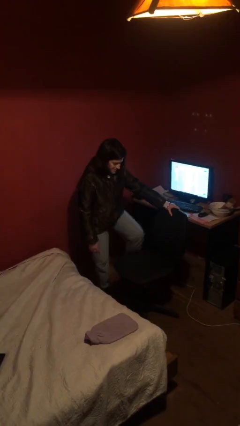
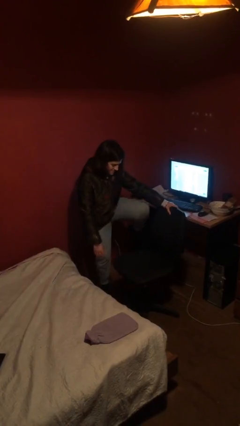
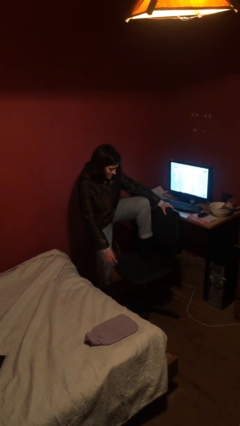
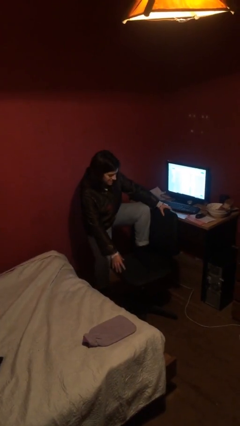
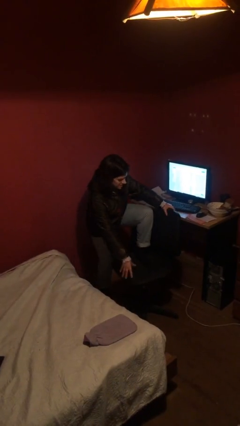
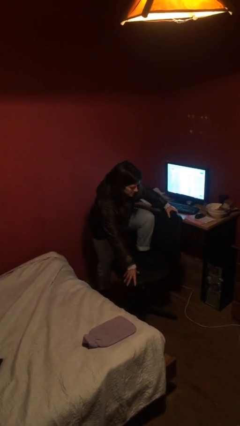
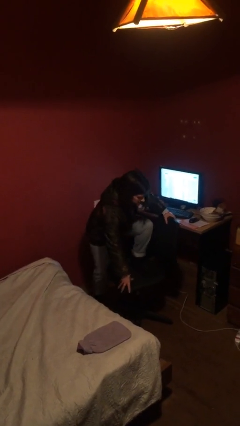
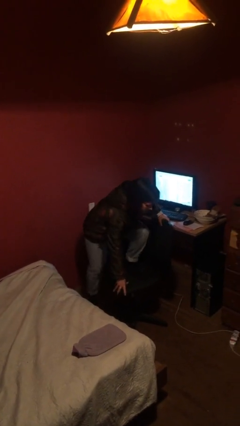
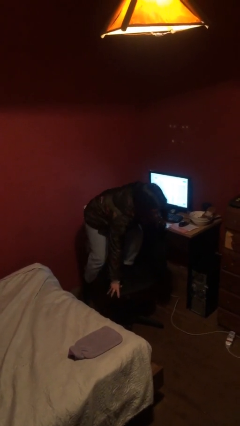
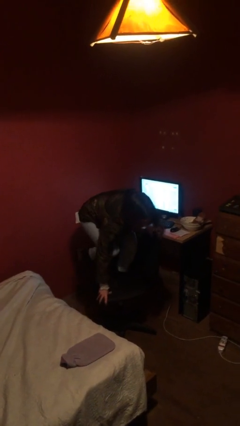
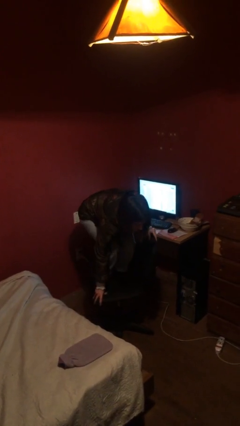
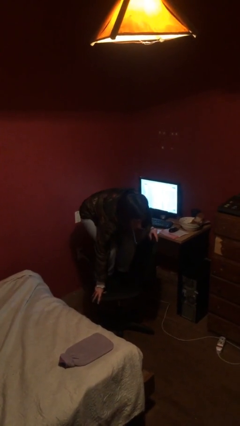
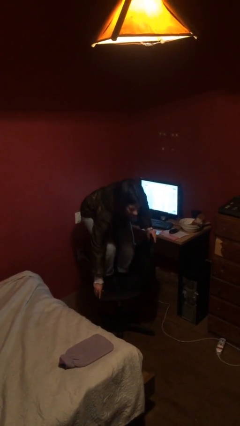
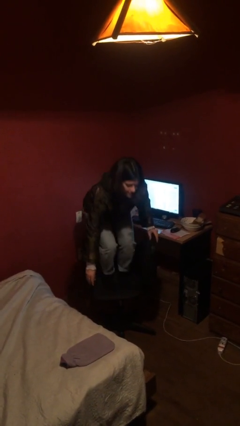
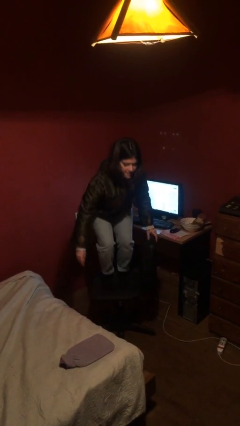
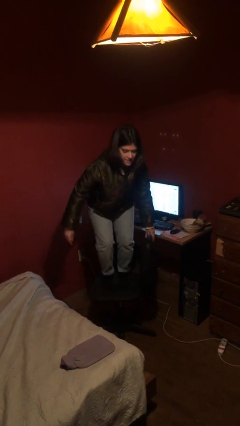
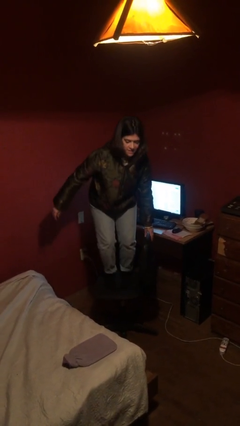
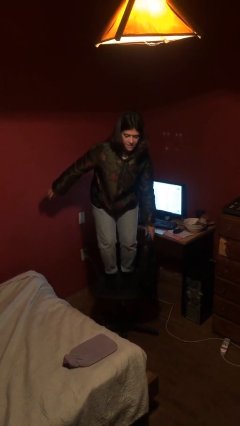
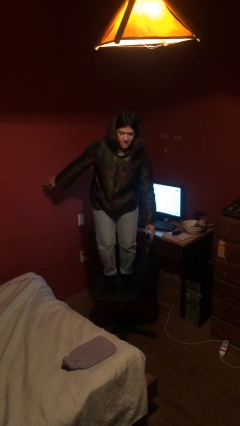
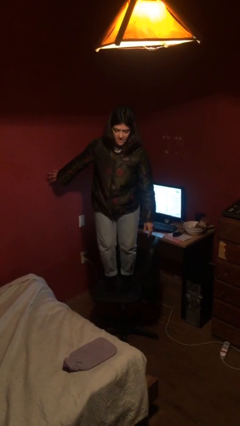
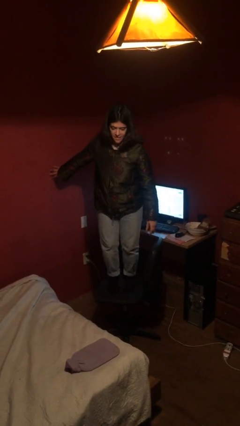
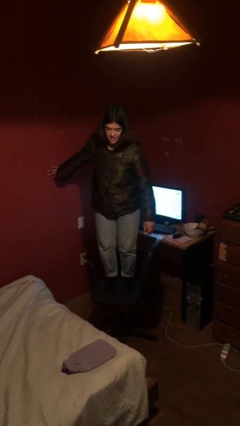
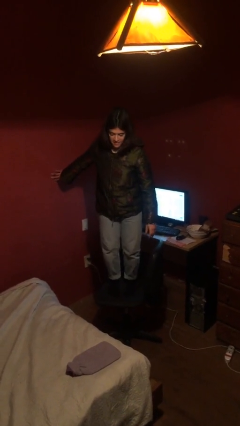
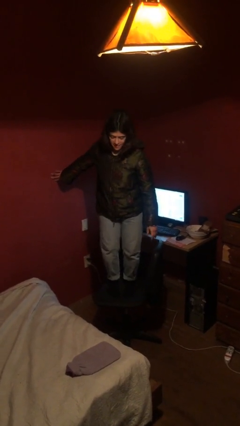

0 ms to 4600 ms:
person climbs on chair

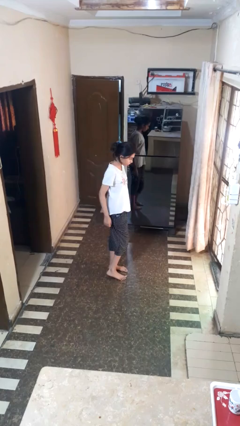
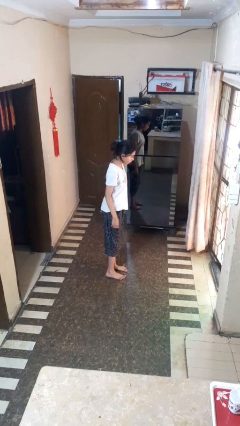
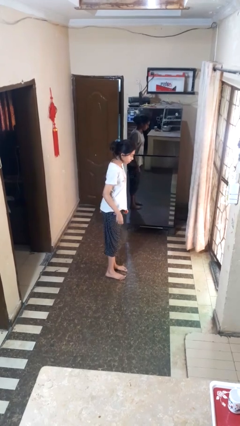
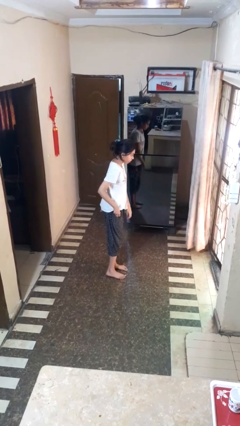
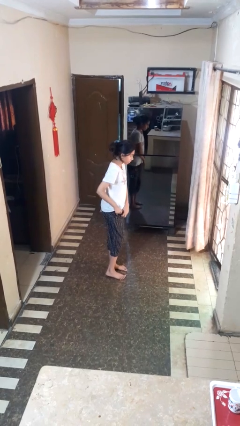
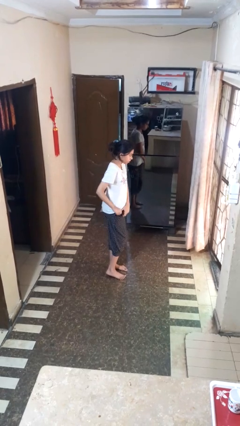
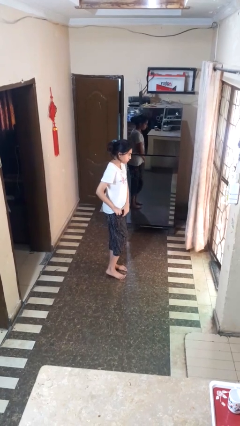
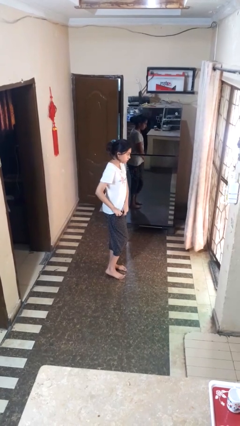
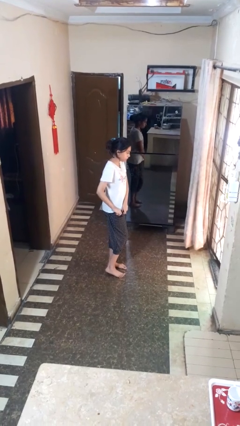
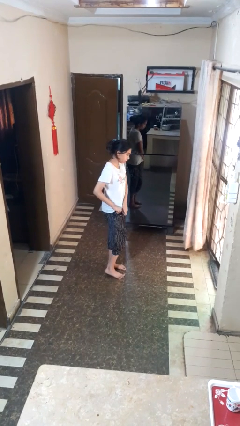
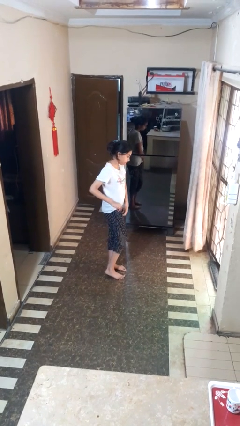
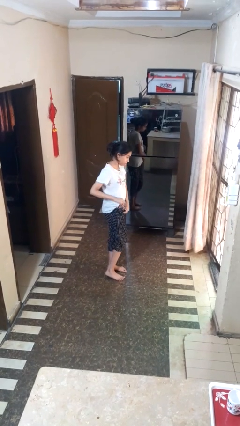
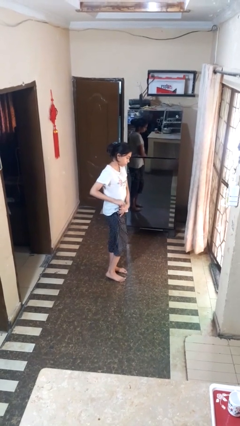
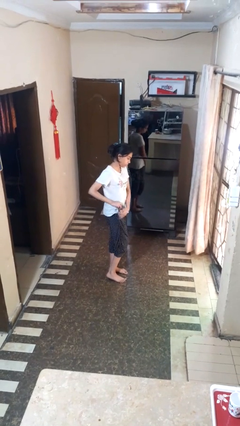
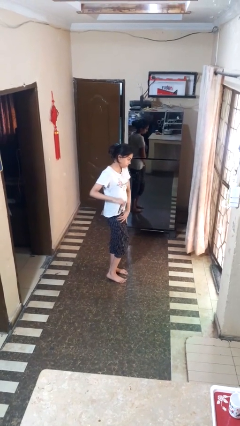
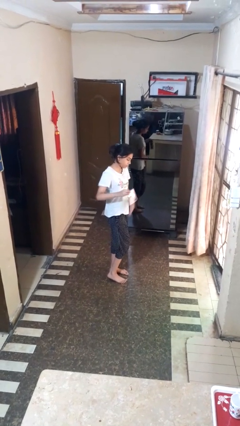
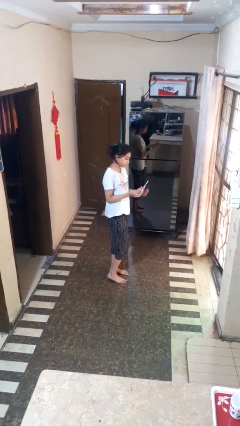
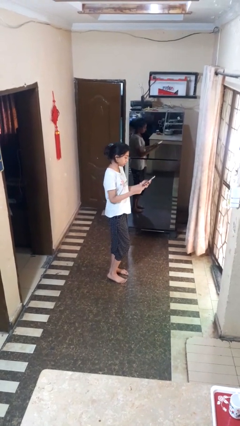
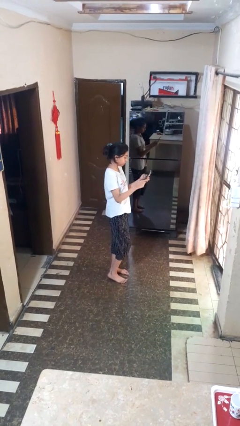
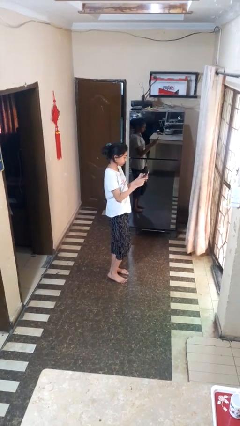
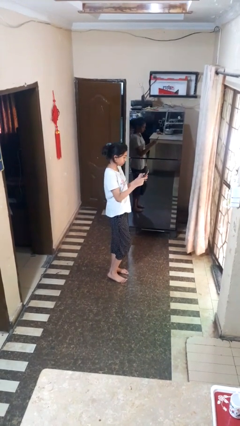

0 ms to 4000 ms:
person takes phone from pocket

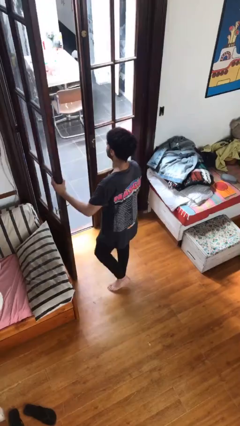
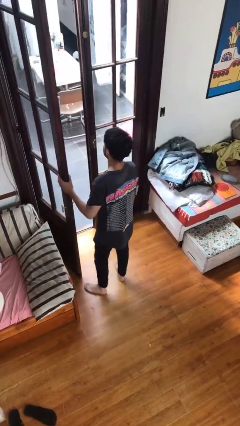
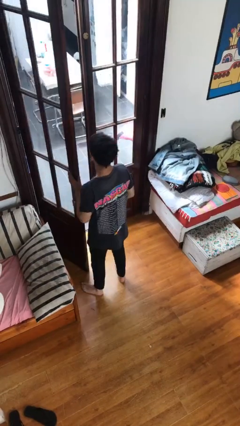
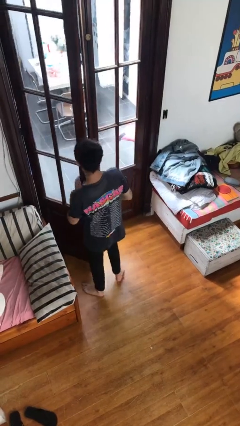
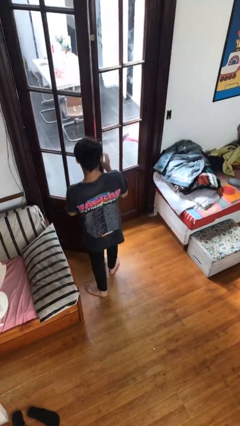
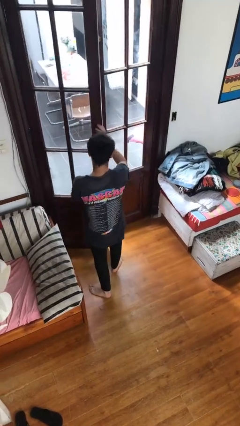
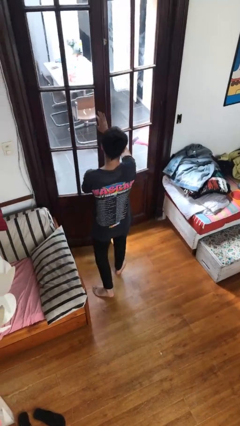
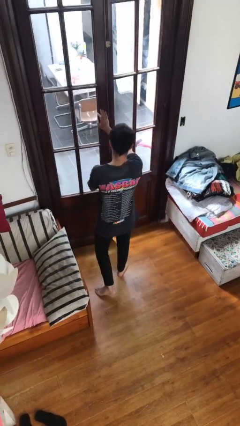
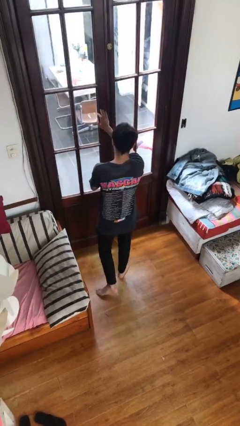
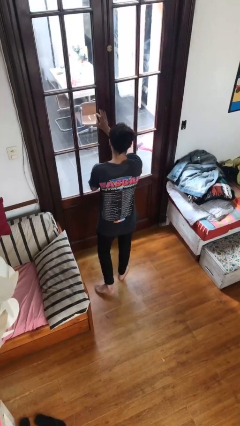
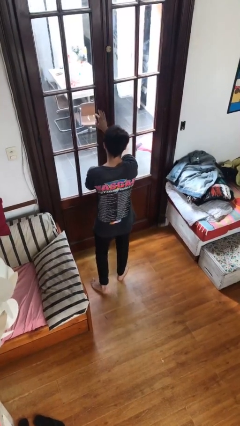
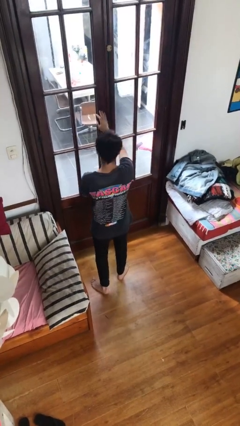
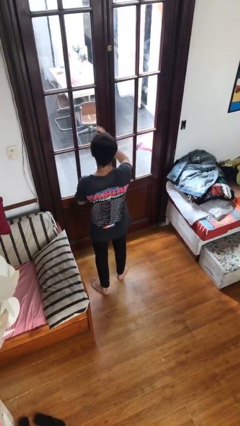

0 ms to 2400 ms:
person closes facility door

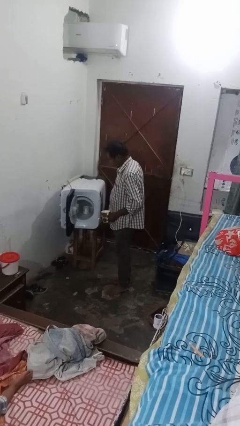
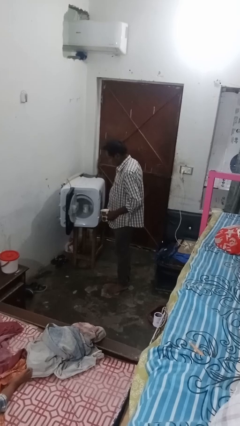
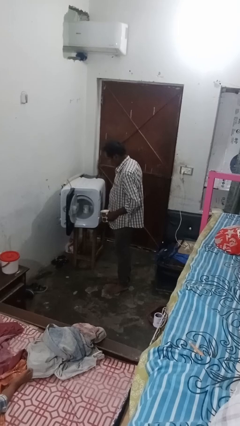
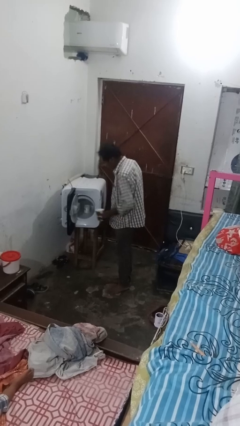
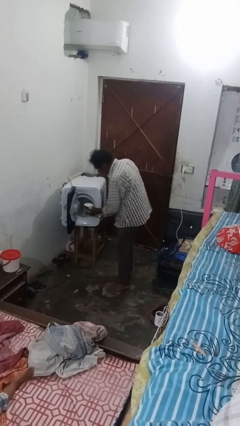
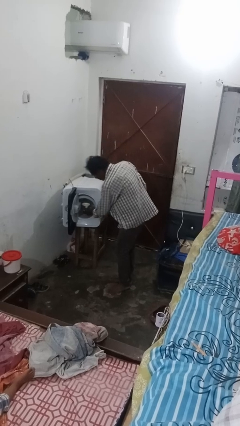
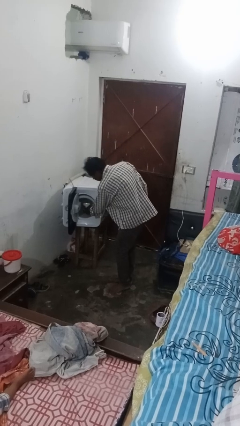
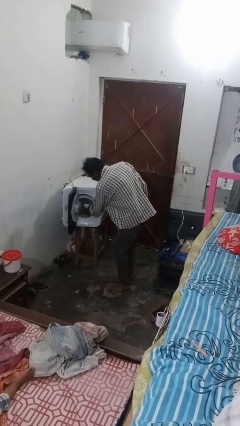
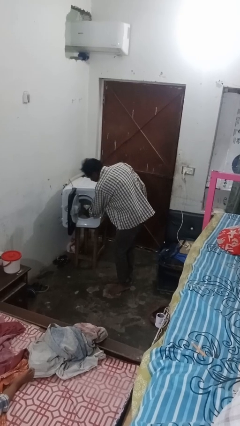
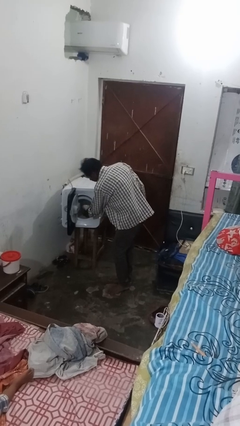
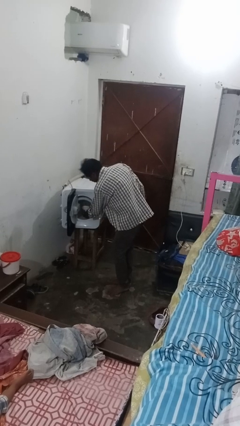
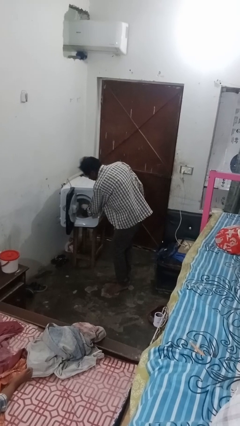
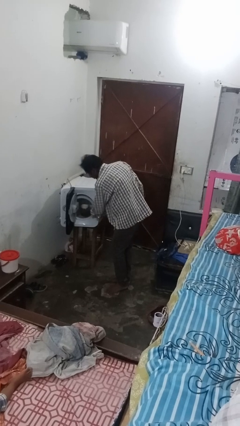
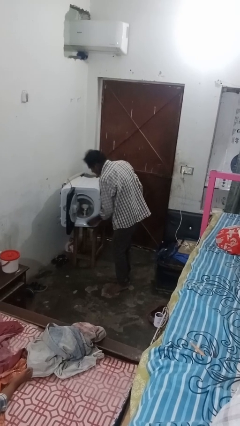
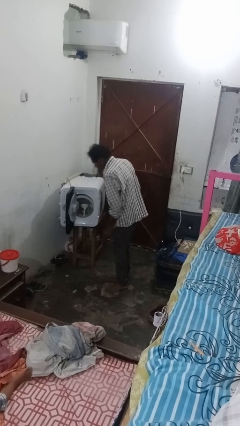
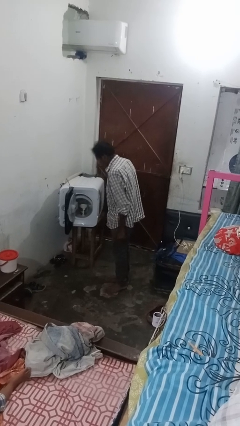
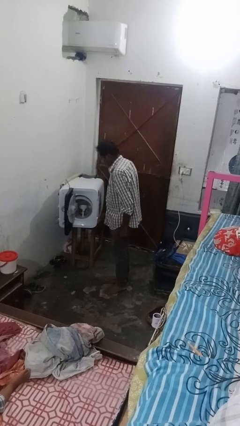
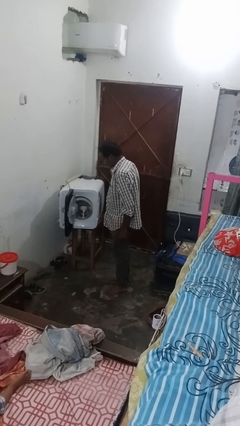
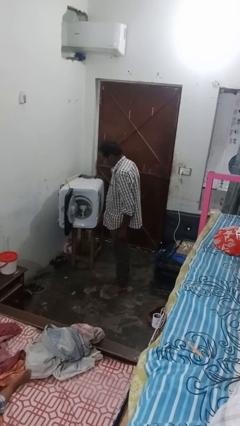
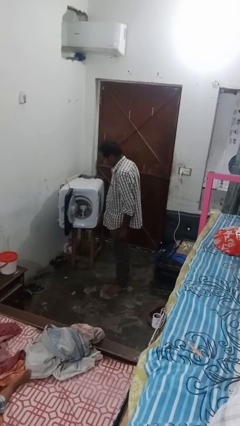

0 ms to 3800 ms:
person loads dishwasher

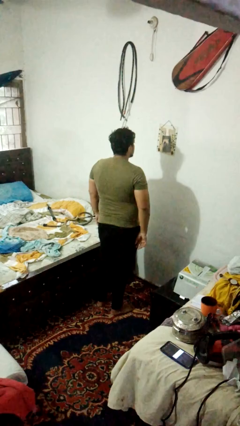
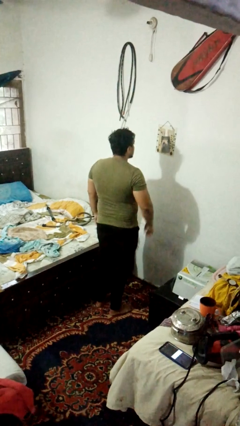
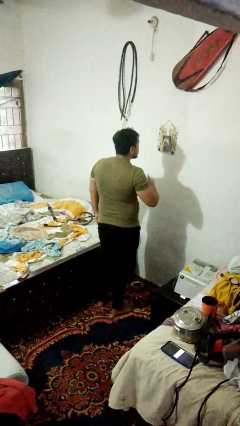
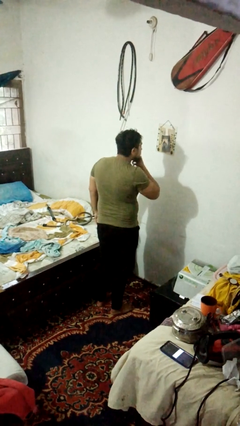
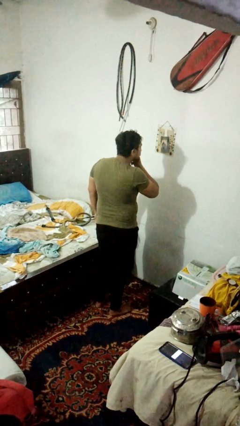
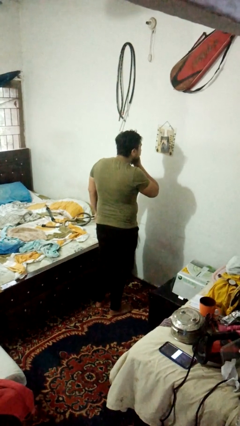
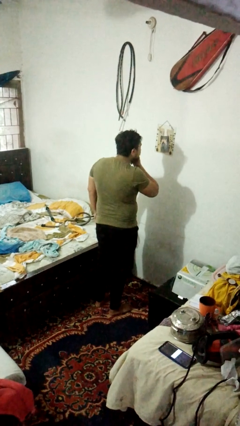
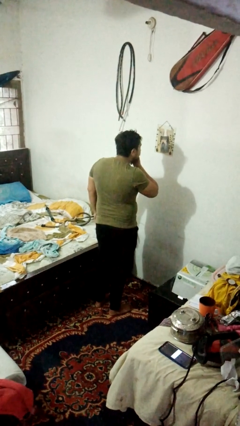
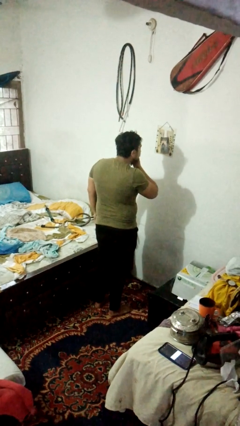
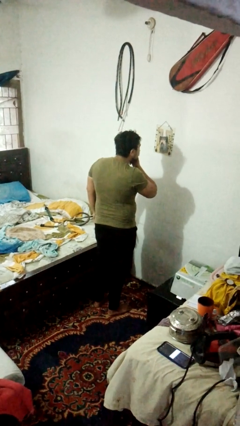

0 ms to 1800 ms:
person strokes chin

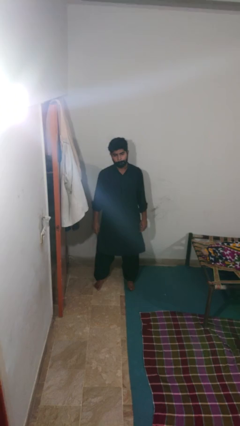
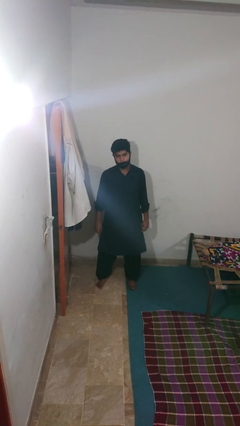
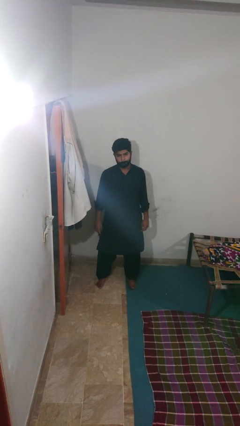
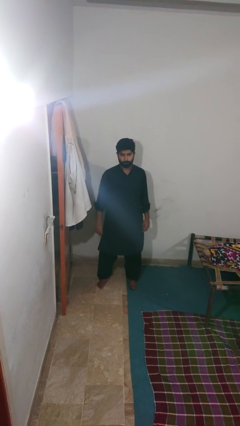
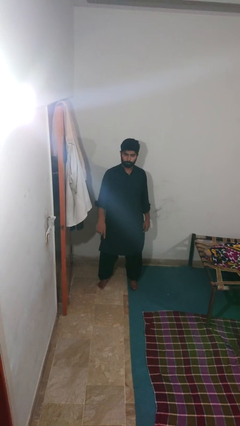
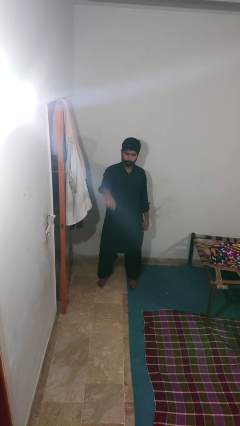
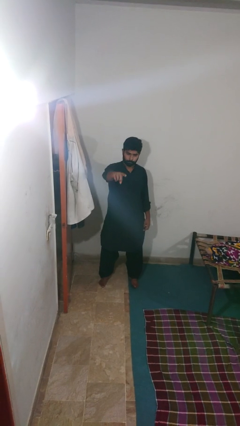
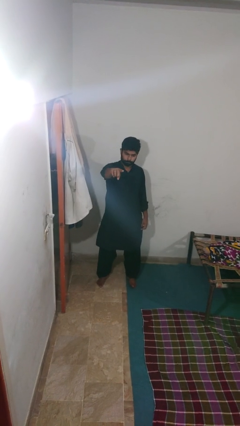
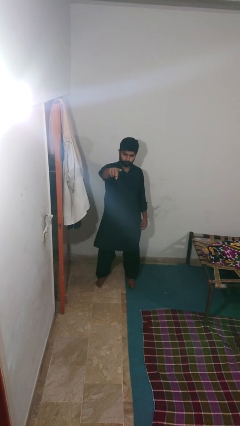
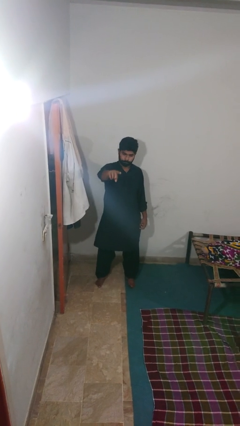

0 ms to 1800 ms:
person points at person
